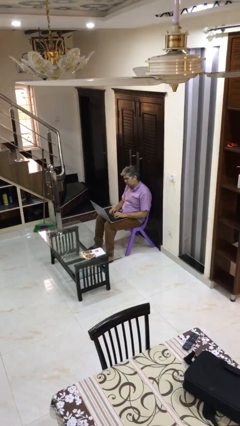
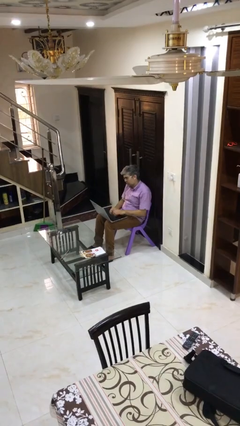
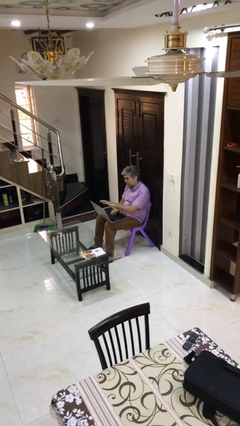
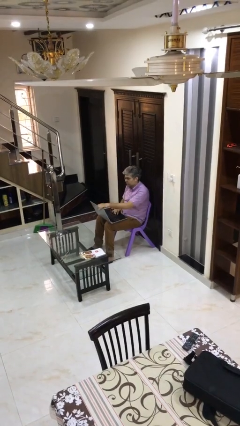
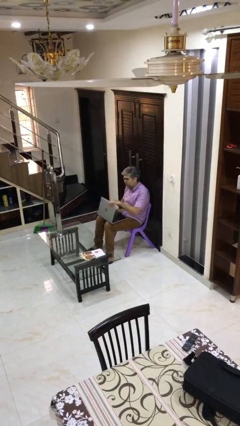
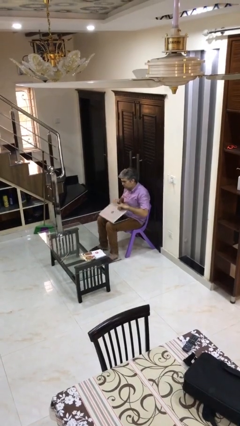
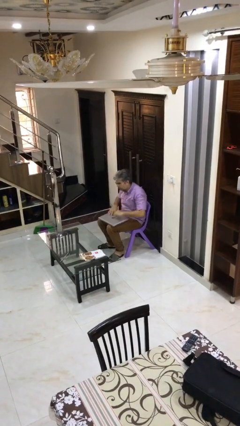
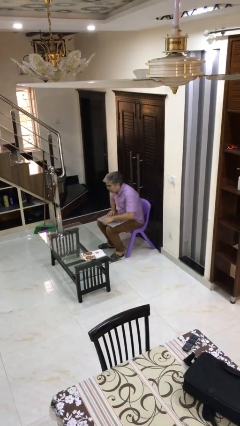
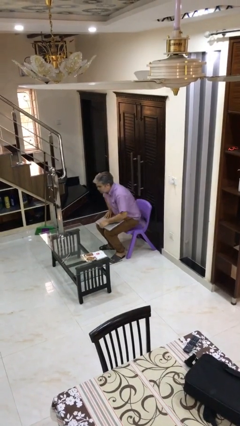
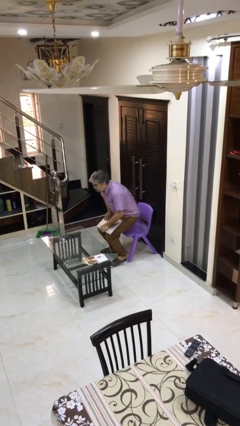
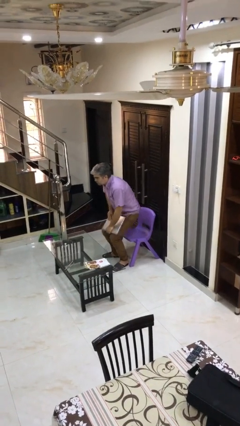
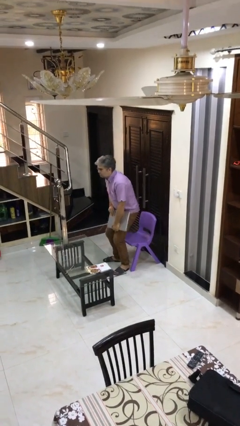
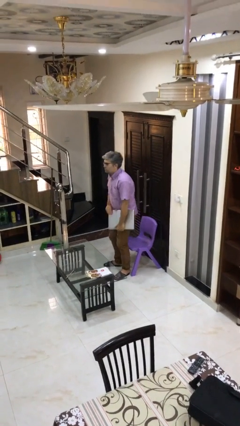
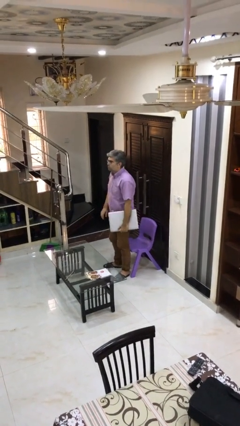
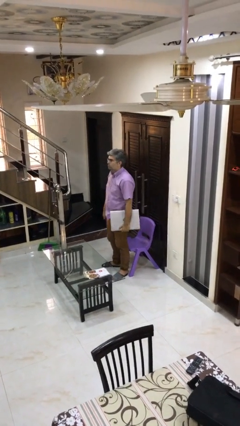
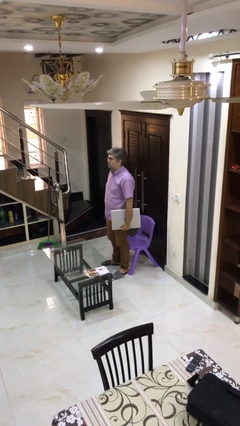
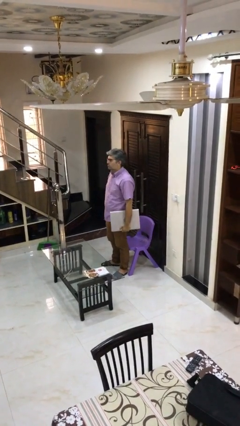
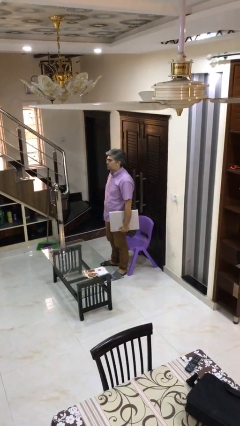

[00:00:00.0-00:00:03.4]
person stands up

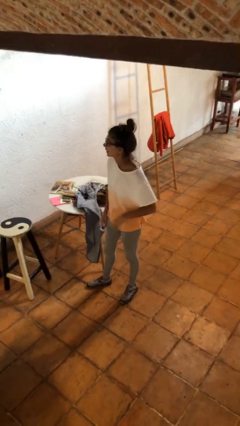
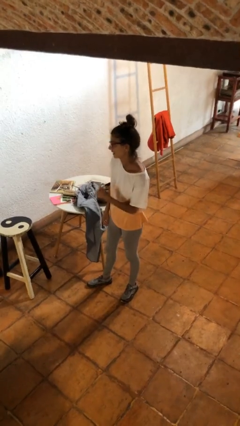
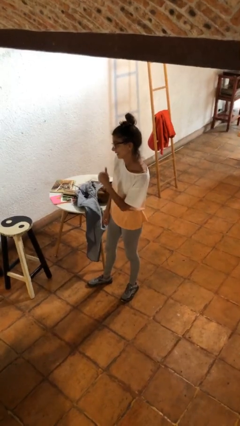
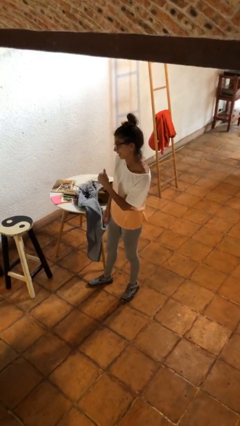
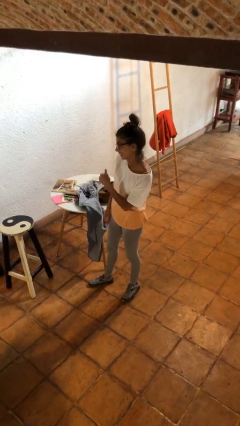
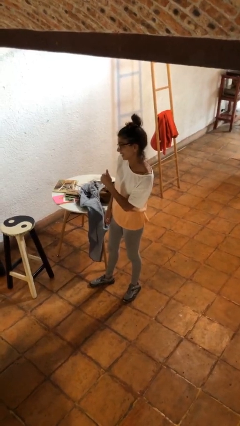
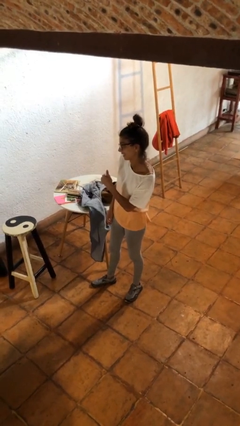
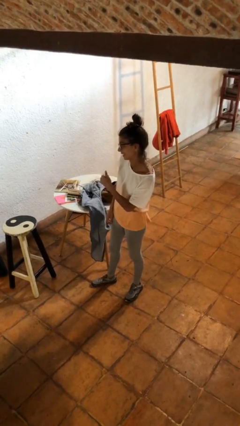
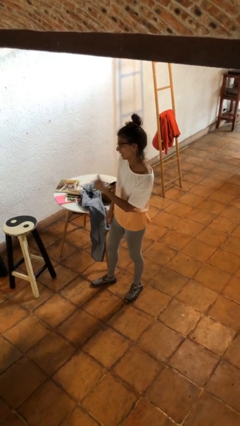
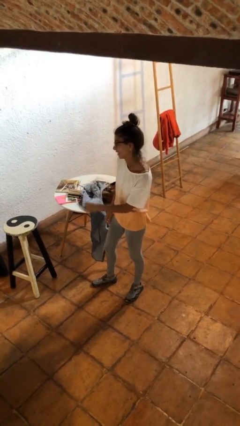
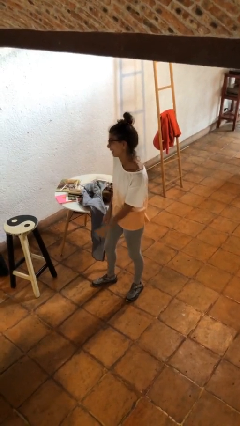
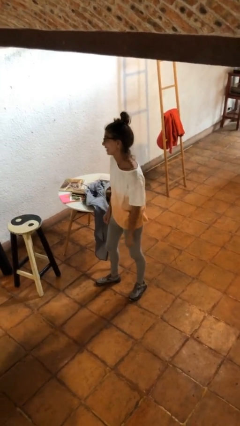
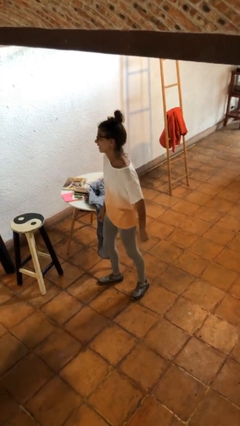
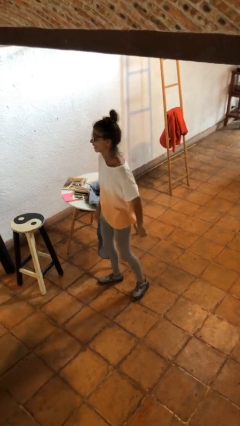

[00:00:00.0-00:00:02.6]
person gestures thumbs up

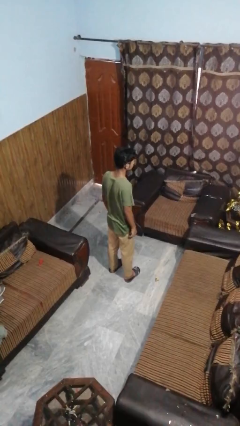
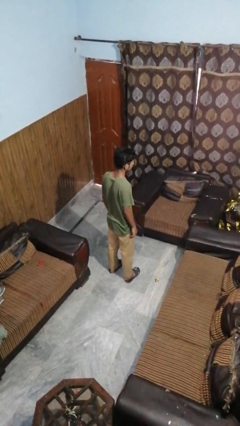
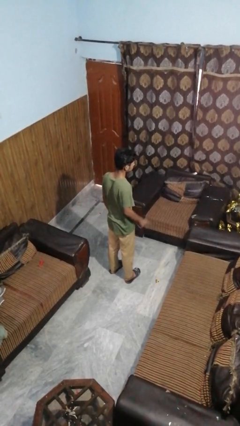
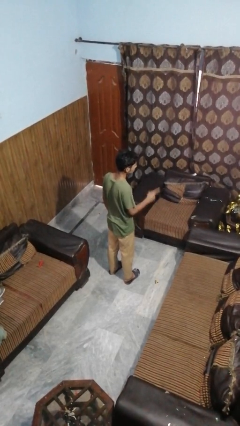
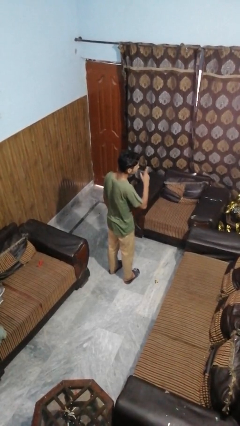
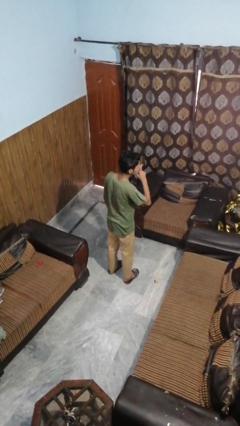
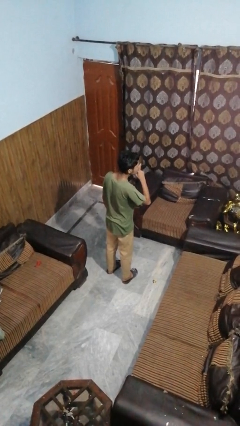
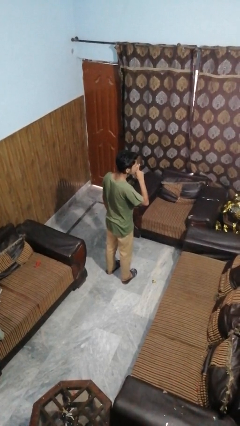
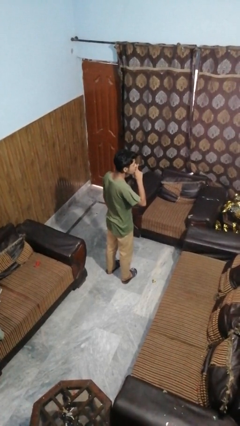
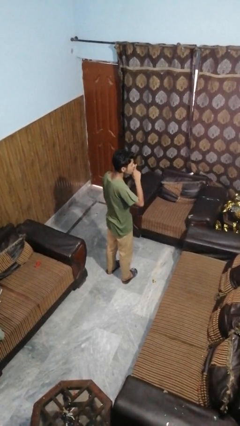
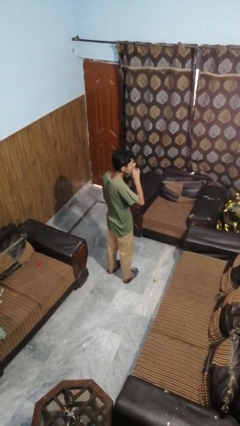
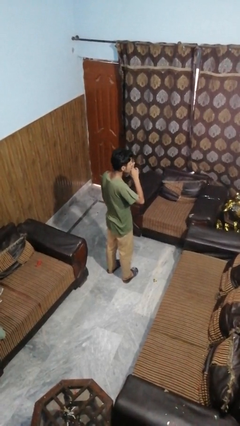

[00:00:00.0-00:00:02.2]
person gestures be quiet

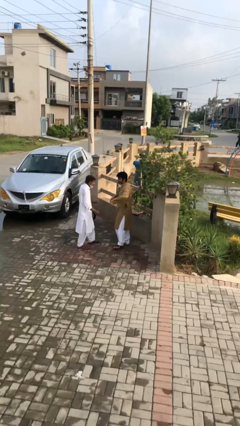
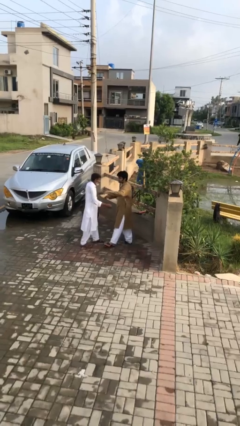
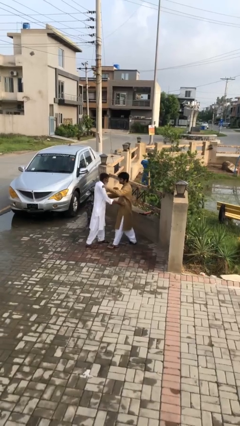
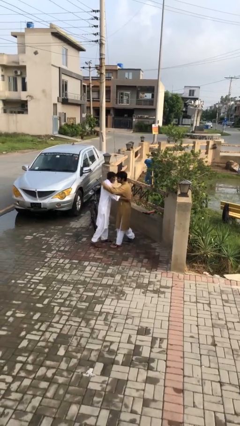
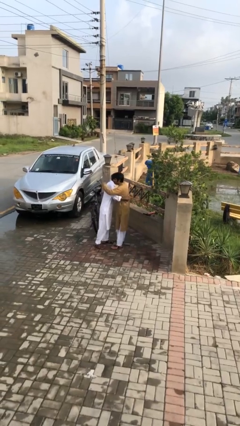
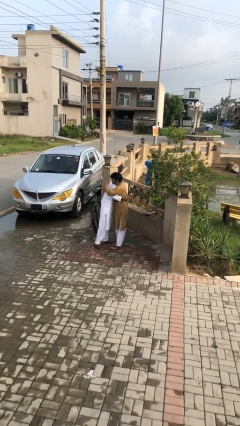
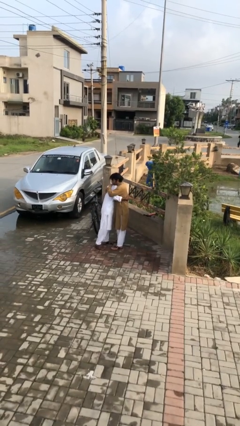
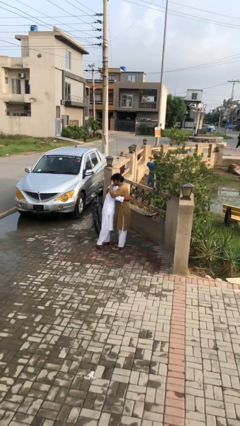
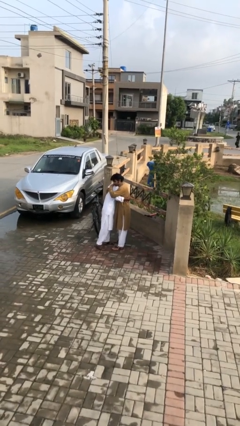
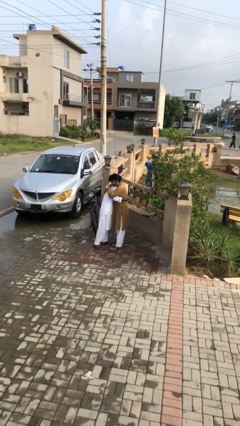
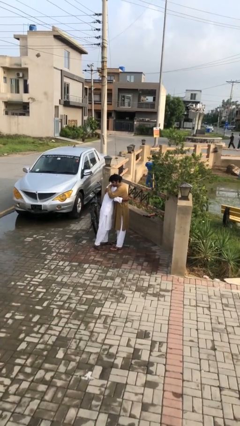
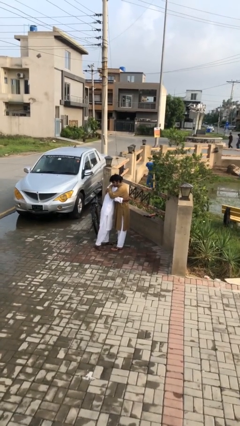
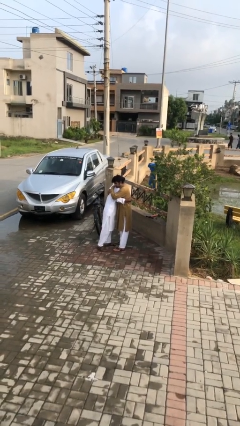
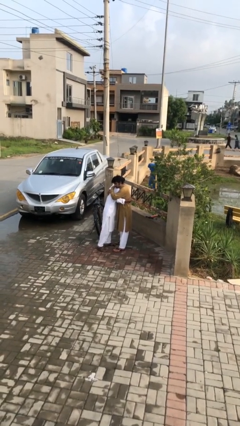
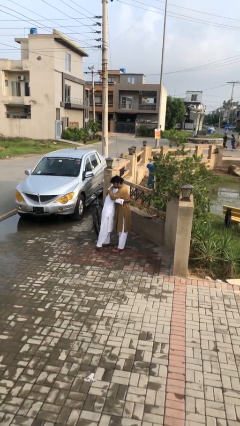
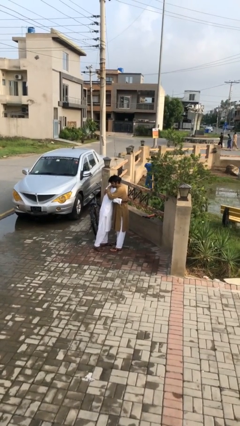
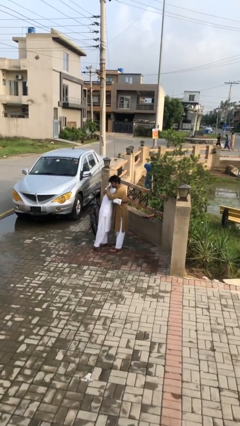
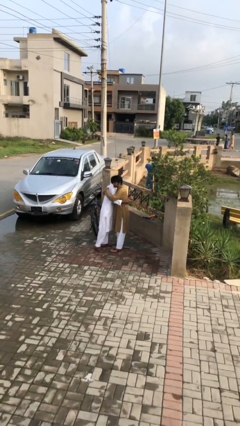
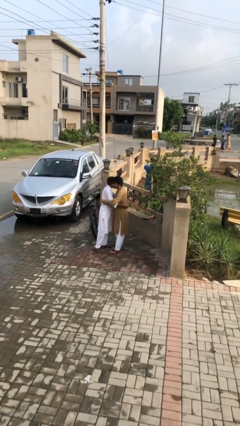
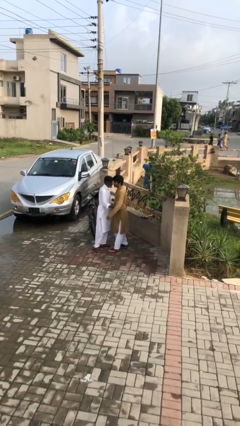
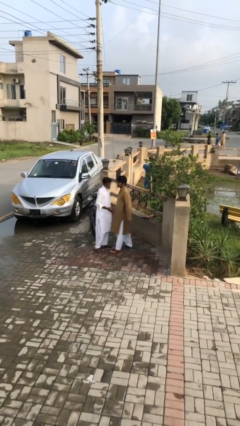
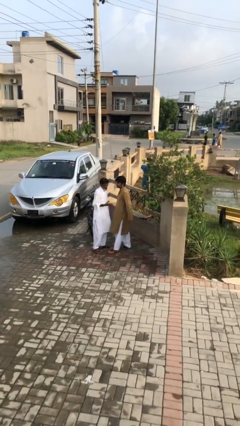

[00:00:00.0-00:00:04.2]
person embraces person

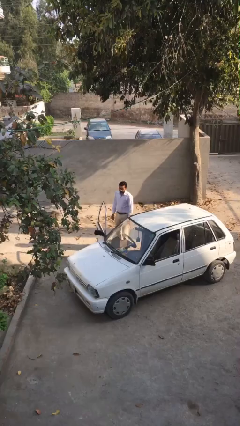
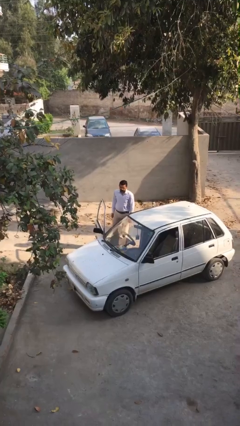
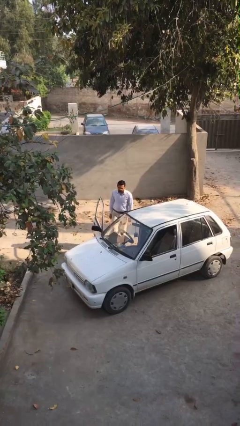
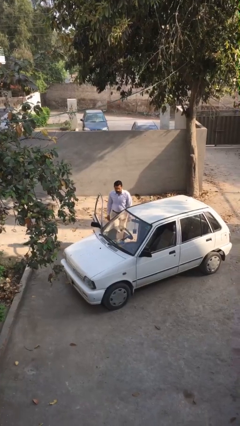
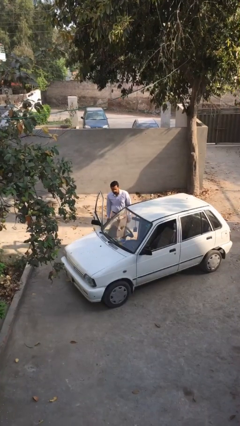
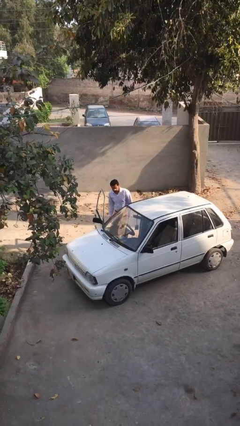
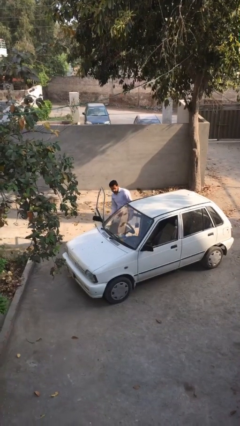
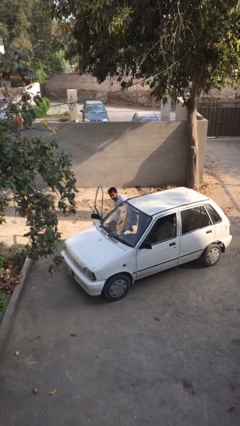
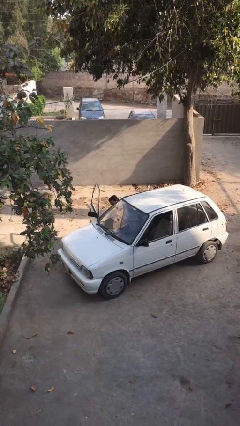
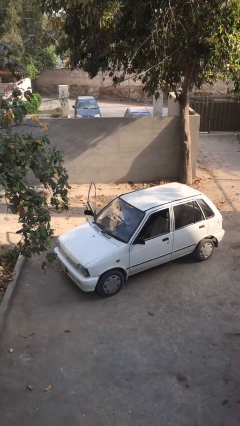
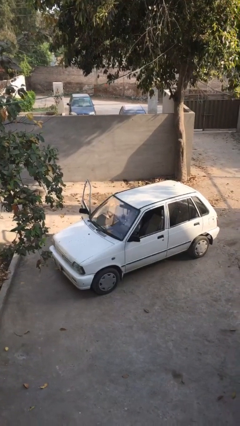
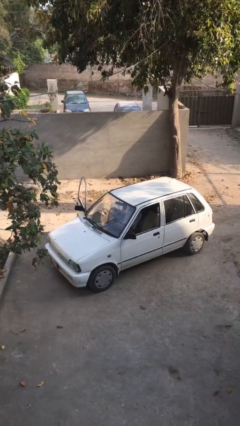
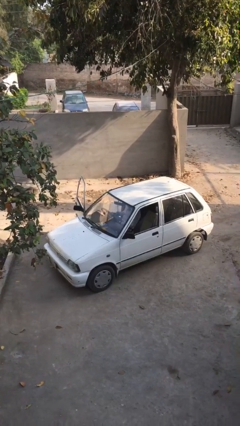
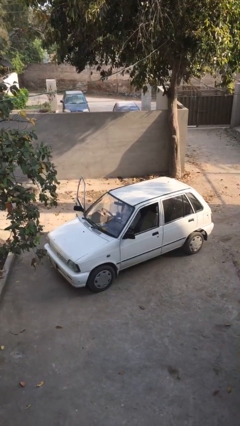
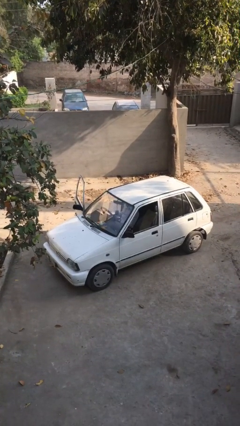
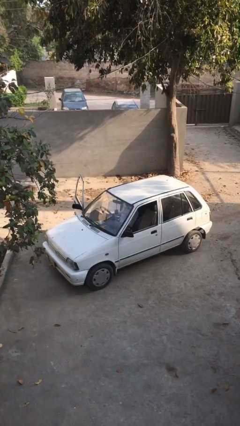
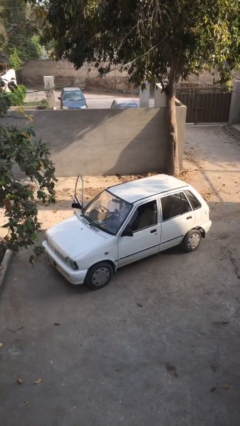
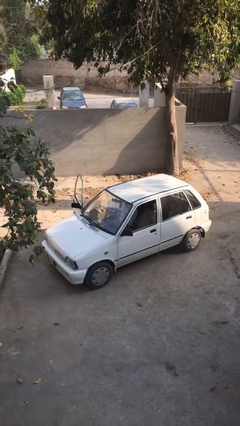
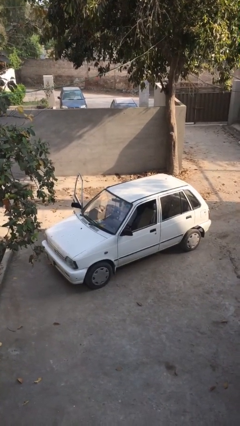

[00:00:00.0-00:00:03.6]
person enters car

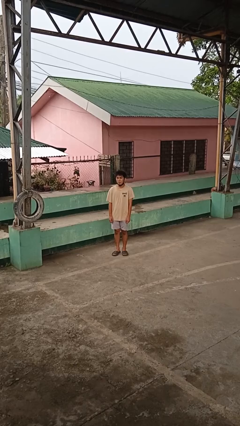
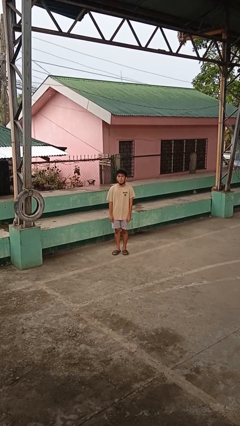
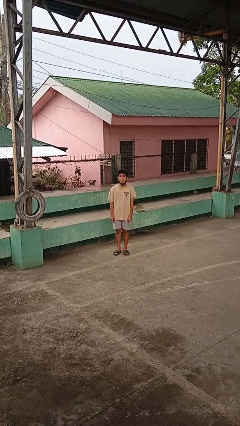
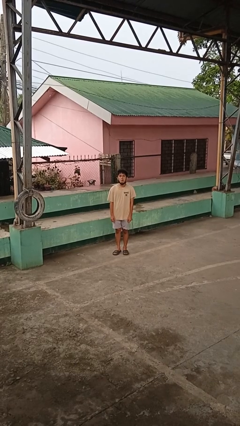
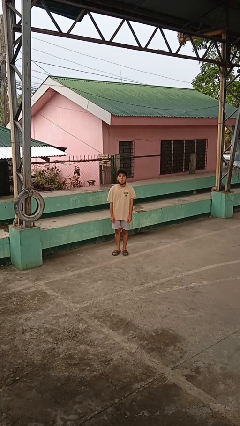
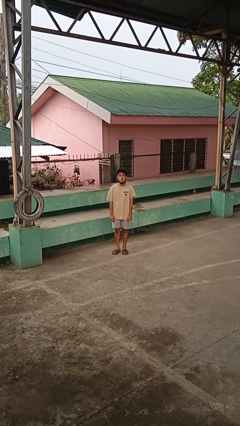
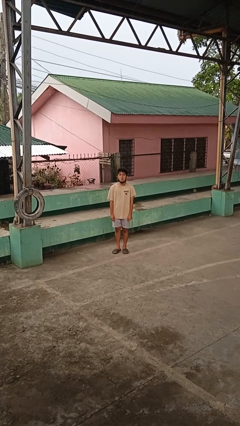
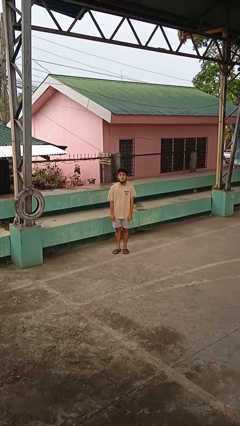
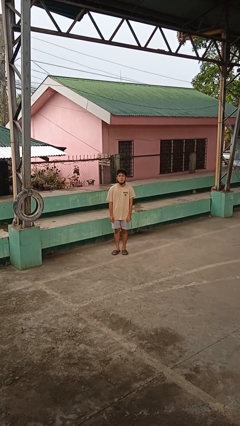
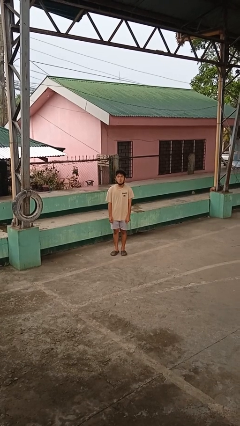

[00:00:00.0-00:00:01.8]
person sticks out tongue
